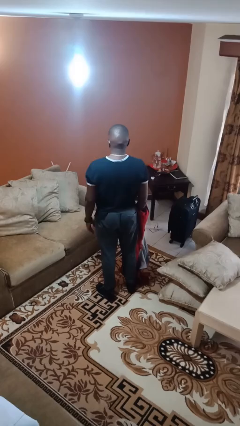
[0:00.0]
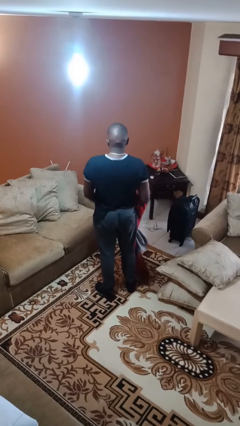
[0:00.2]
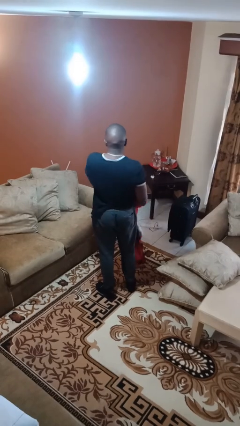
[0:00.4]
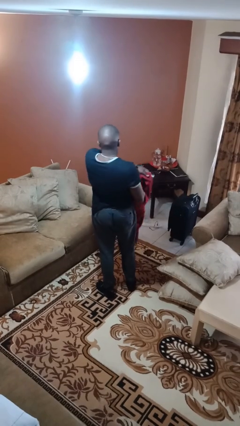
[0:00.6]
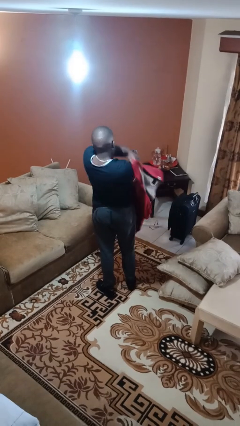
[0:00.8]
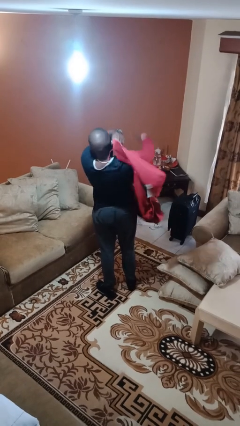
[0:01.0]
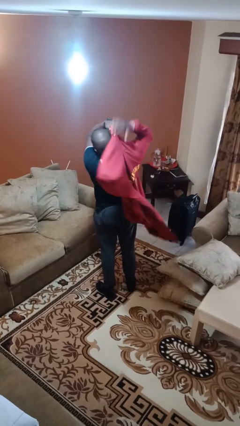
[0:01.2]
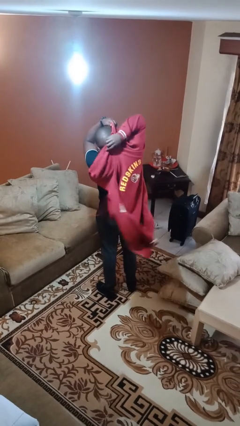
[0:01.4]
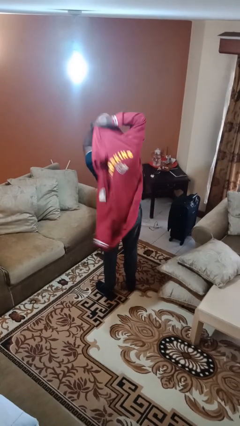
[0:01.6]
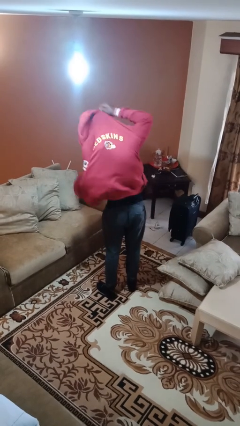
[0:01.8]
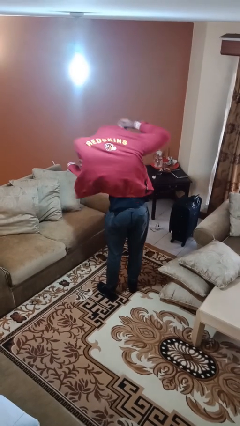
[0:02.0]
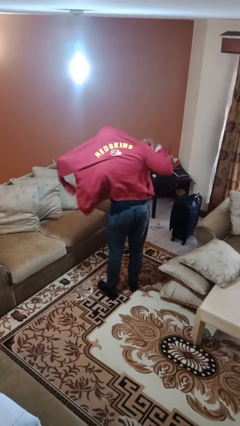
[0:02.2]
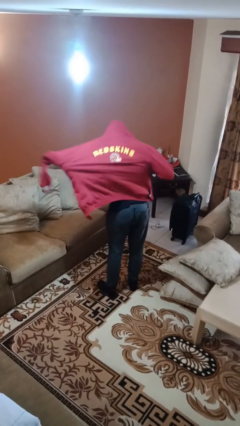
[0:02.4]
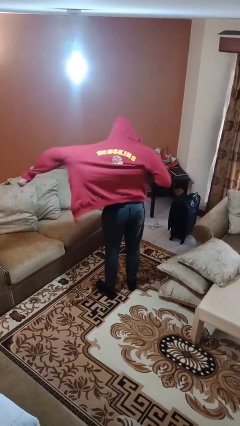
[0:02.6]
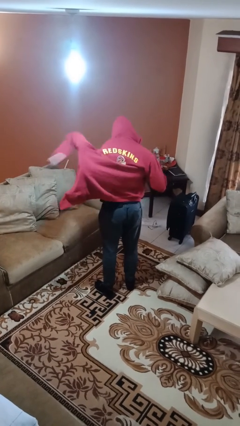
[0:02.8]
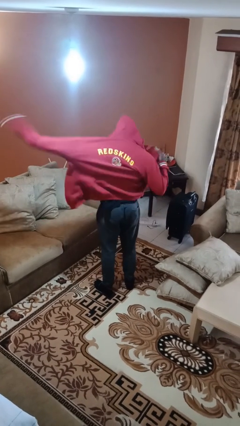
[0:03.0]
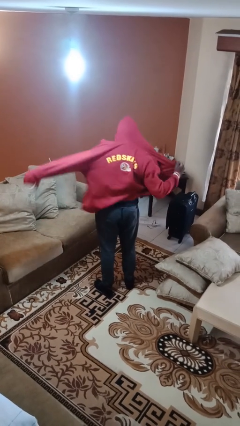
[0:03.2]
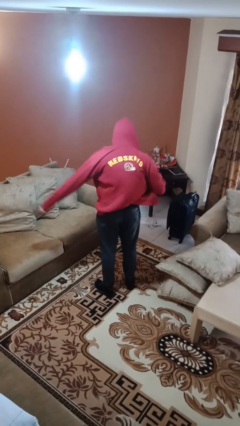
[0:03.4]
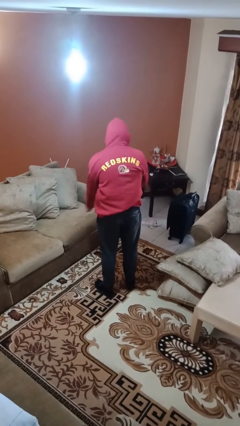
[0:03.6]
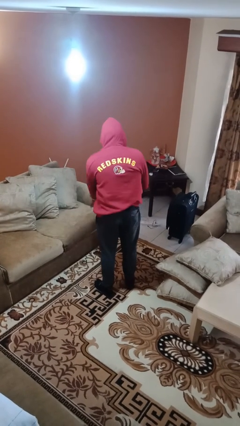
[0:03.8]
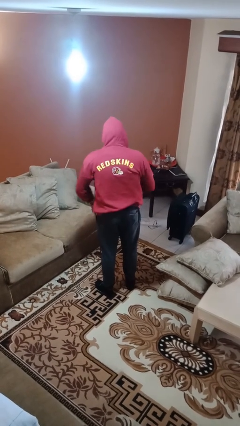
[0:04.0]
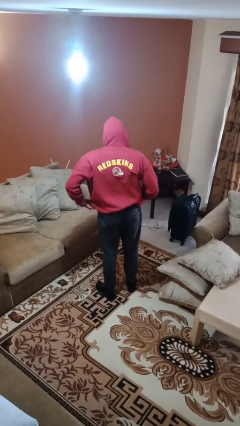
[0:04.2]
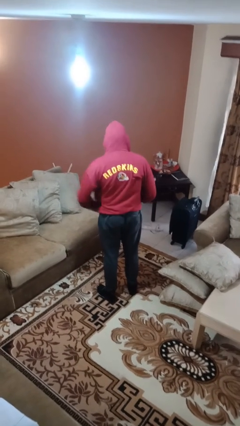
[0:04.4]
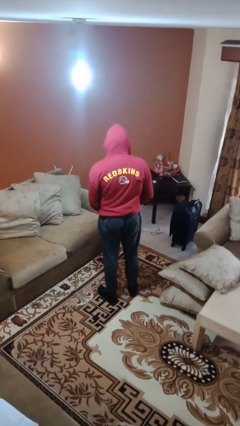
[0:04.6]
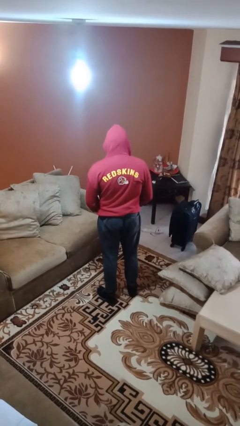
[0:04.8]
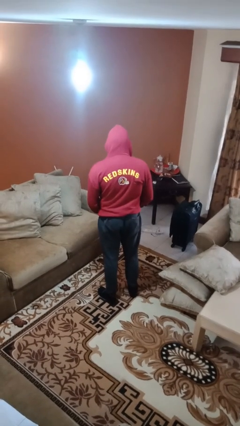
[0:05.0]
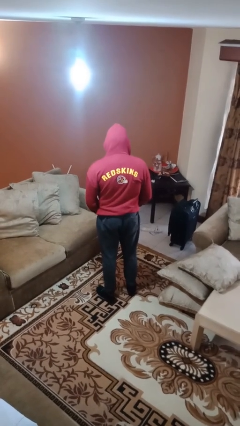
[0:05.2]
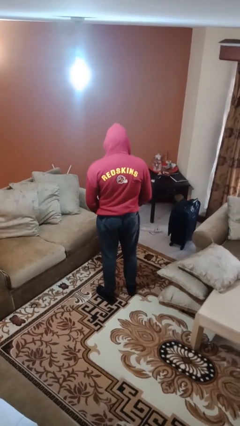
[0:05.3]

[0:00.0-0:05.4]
person puts on hoodie

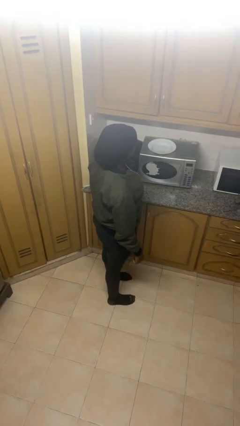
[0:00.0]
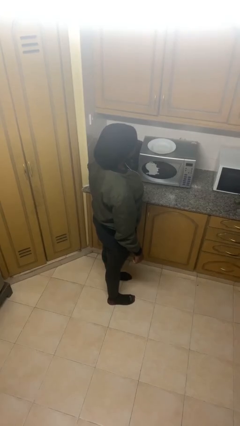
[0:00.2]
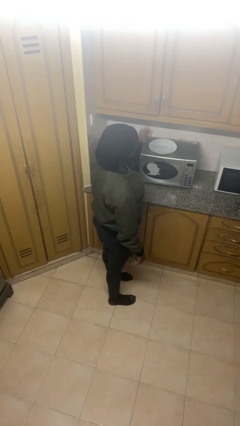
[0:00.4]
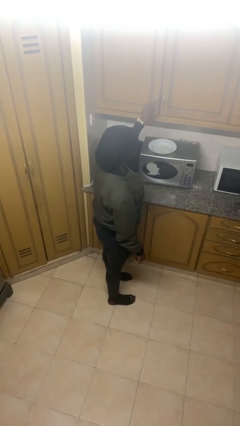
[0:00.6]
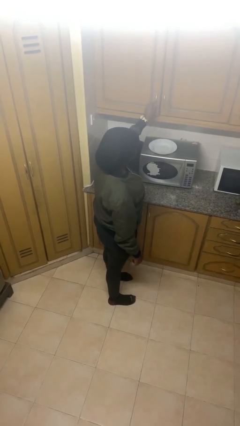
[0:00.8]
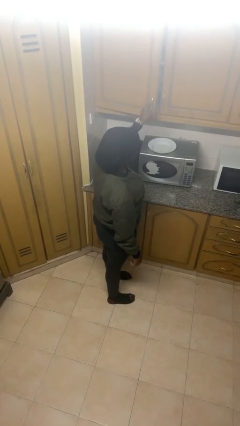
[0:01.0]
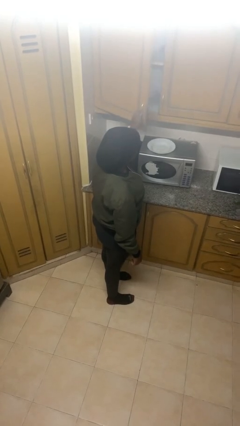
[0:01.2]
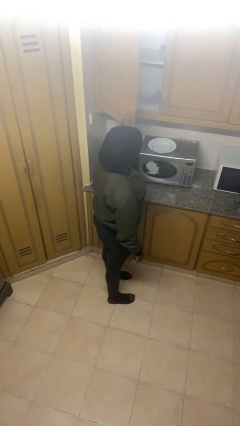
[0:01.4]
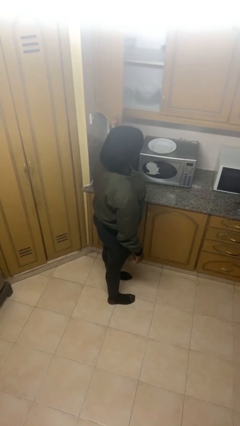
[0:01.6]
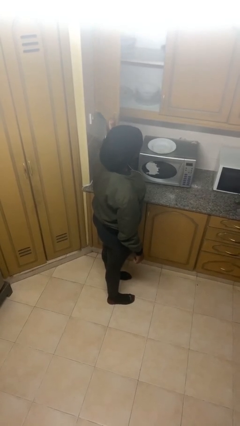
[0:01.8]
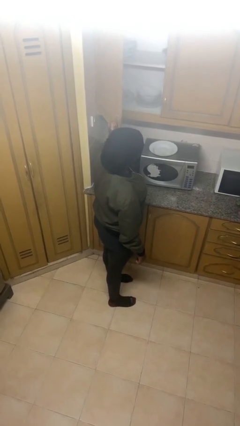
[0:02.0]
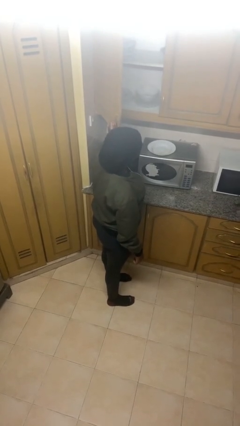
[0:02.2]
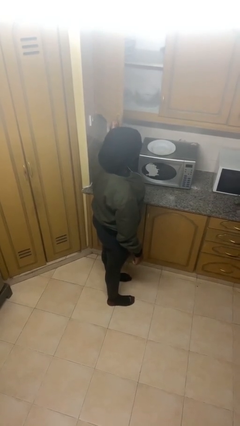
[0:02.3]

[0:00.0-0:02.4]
person opens cabinet

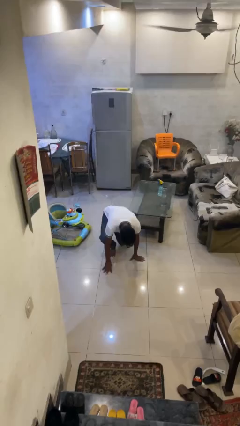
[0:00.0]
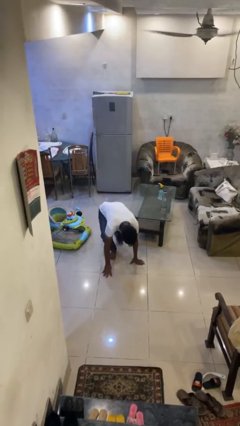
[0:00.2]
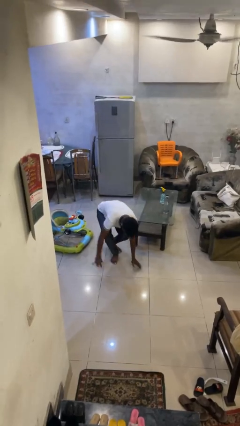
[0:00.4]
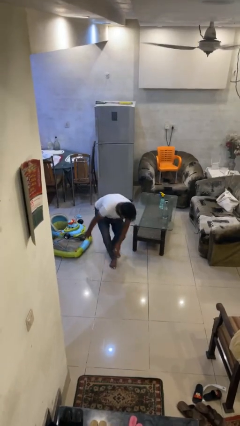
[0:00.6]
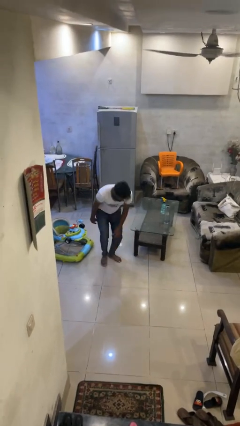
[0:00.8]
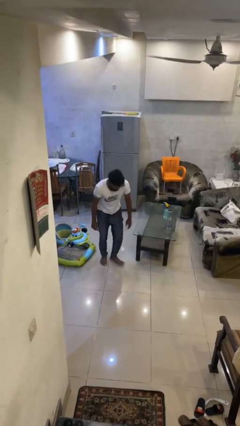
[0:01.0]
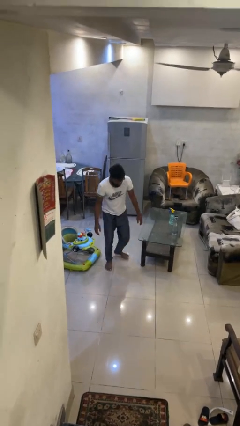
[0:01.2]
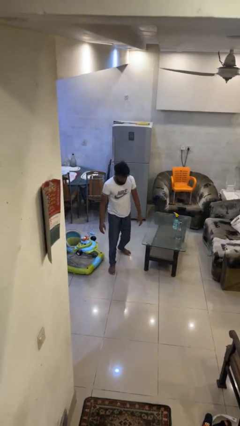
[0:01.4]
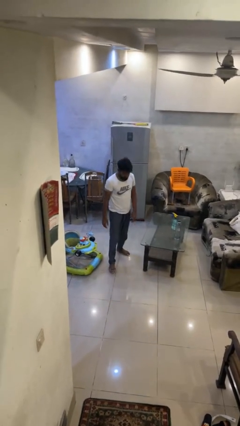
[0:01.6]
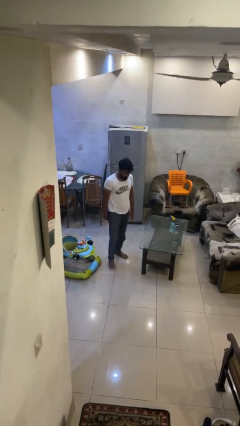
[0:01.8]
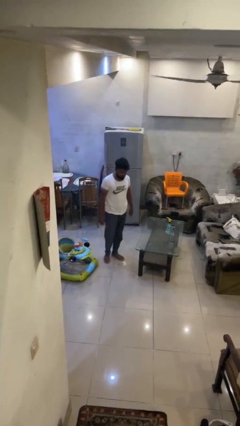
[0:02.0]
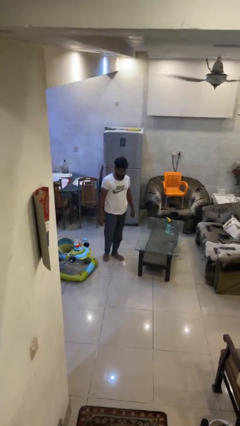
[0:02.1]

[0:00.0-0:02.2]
person stands up from floor

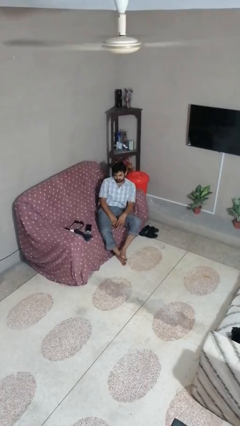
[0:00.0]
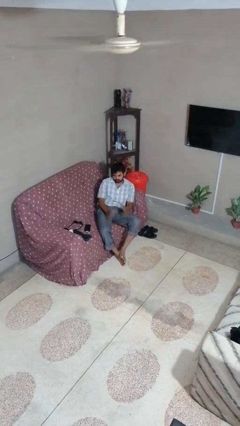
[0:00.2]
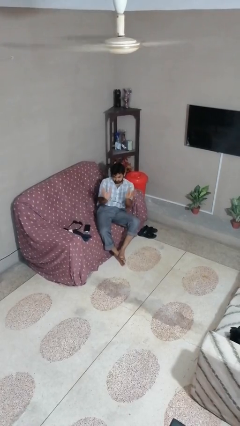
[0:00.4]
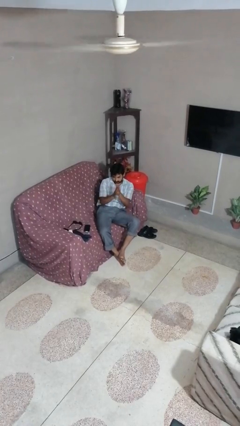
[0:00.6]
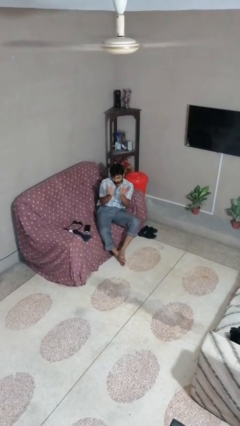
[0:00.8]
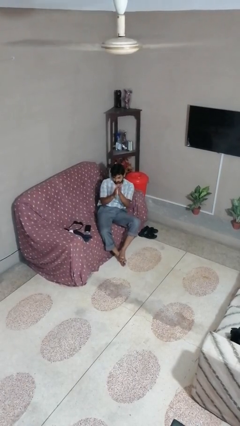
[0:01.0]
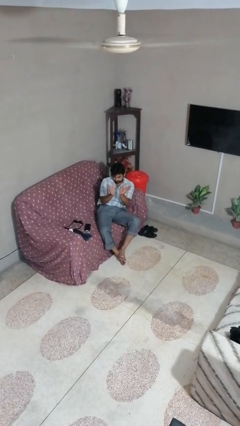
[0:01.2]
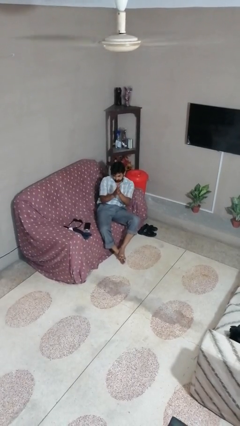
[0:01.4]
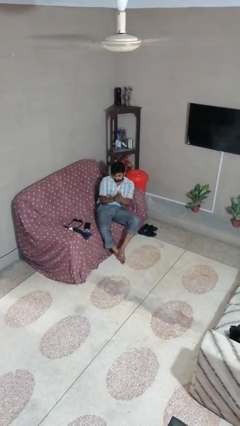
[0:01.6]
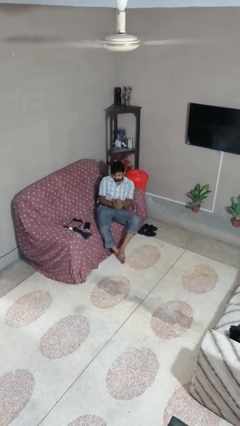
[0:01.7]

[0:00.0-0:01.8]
person claps hands

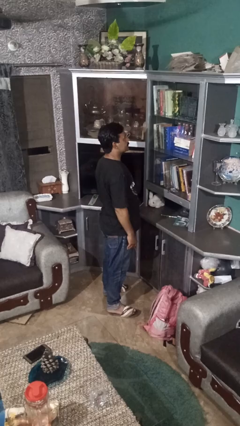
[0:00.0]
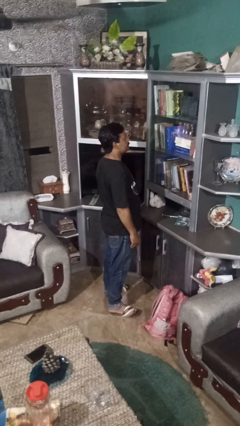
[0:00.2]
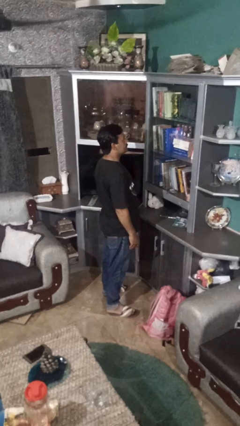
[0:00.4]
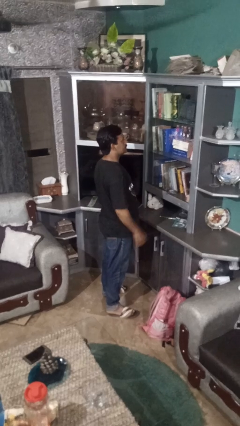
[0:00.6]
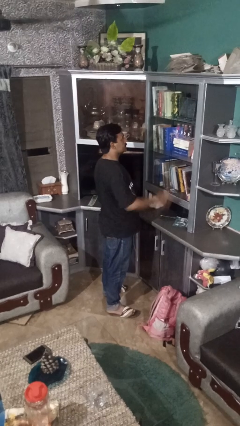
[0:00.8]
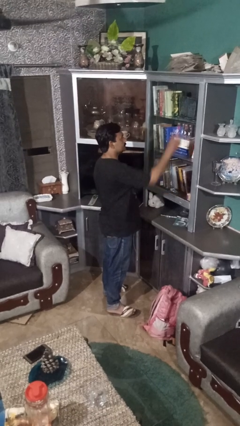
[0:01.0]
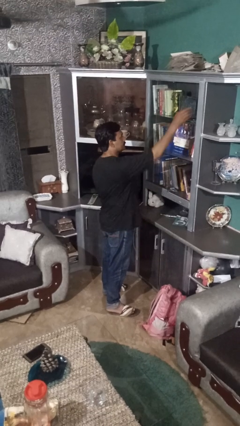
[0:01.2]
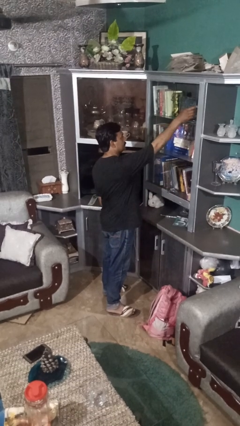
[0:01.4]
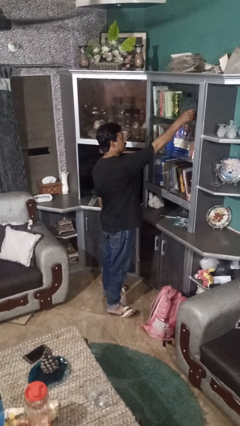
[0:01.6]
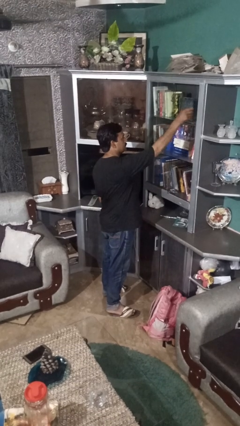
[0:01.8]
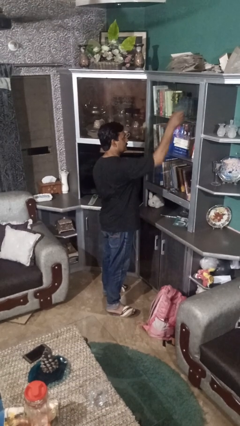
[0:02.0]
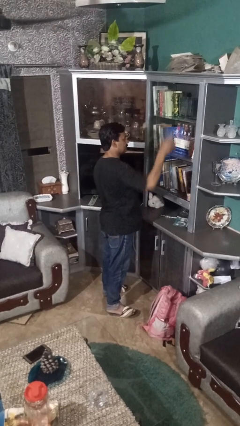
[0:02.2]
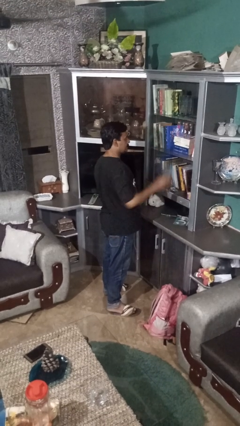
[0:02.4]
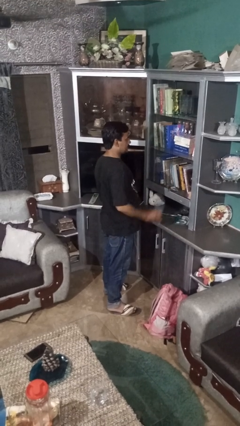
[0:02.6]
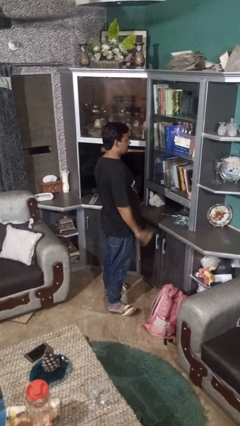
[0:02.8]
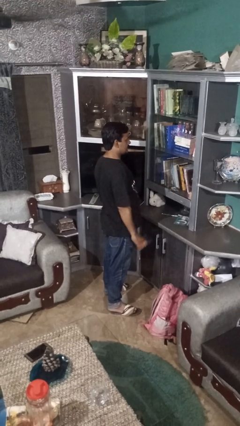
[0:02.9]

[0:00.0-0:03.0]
person picks up object from shelf

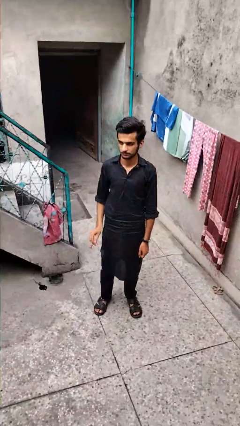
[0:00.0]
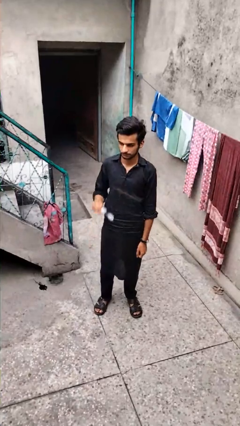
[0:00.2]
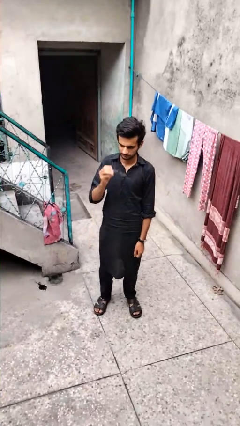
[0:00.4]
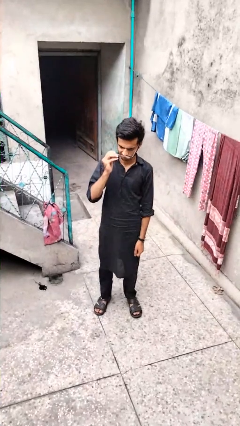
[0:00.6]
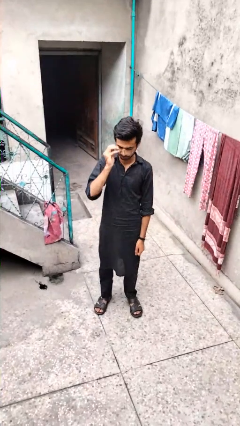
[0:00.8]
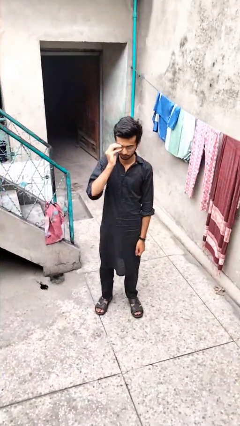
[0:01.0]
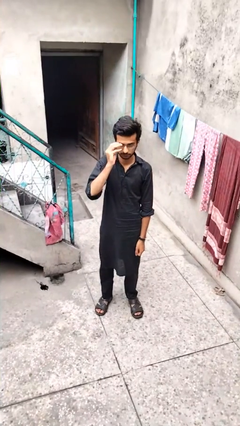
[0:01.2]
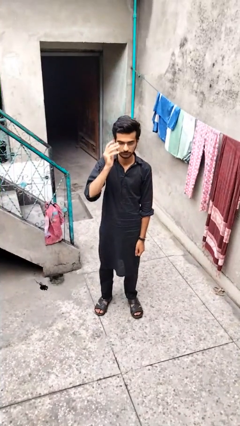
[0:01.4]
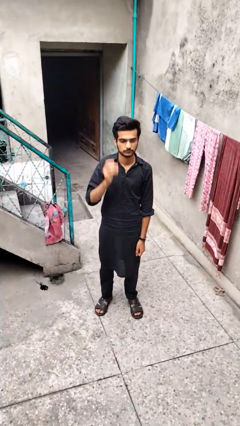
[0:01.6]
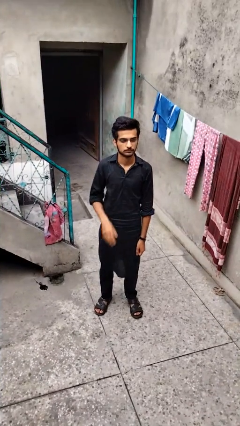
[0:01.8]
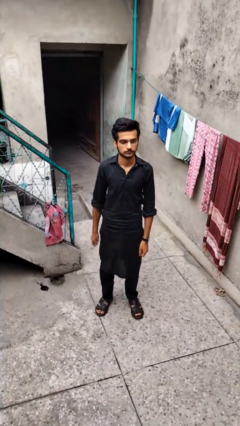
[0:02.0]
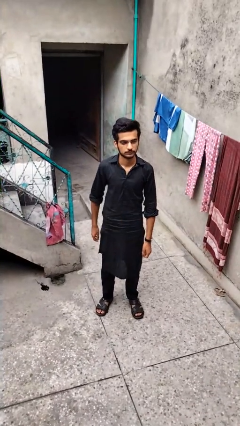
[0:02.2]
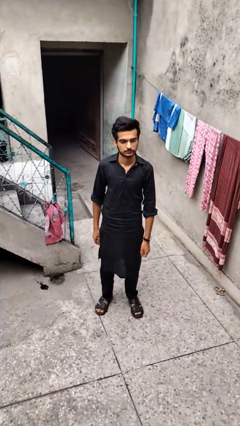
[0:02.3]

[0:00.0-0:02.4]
person puts on glasses
